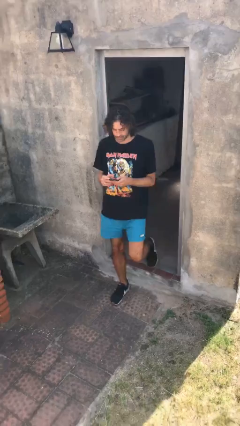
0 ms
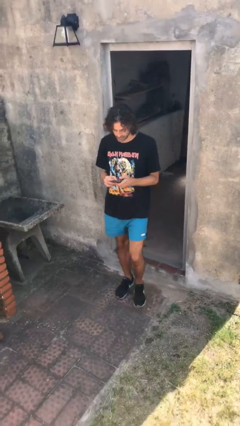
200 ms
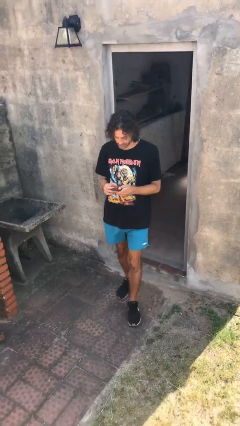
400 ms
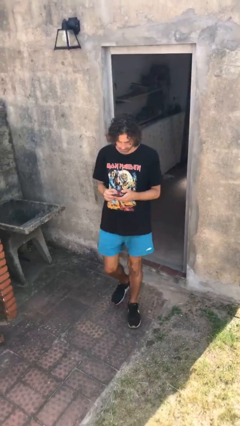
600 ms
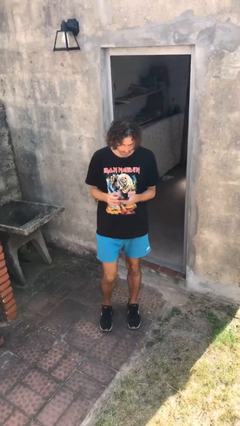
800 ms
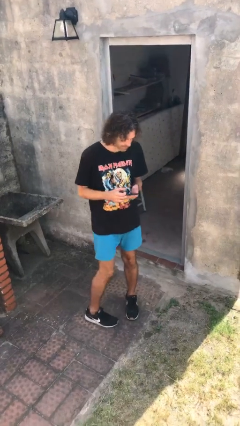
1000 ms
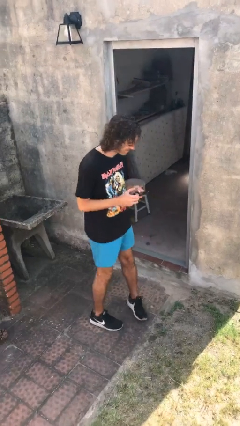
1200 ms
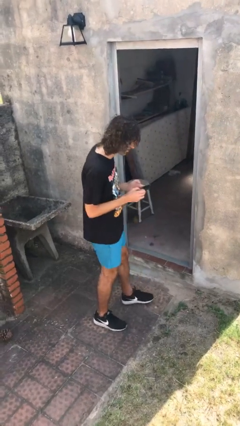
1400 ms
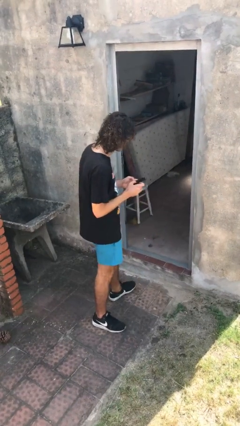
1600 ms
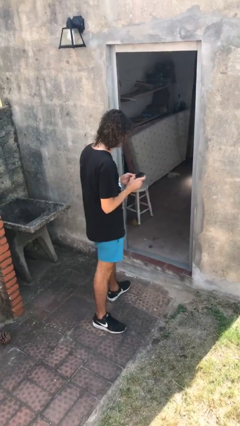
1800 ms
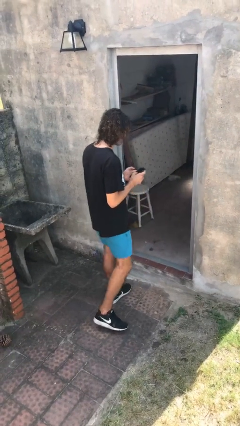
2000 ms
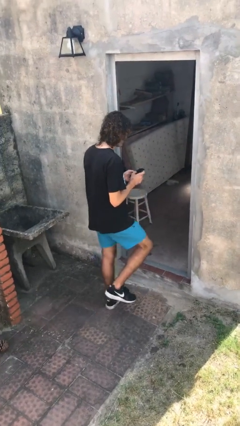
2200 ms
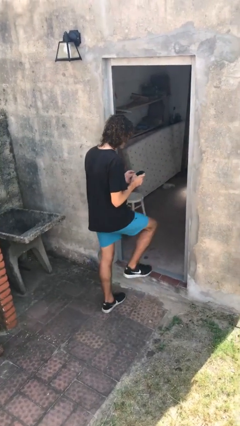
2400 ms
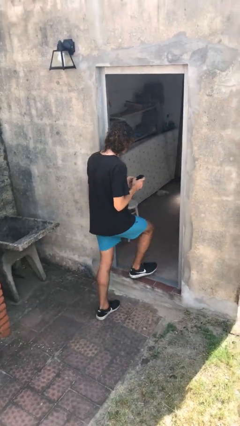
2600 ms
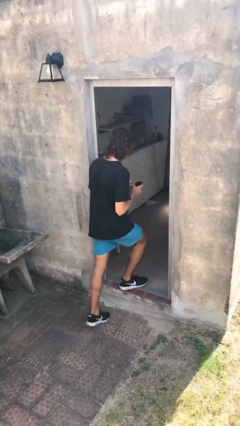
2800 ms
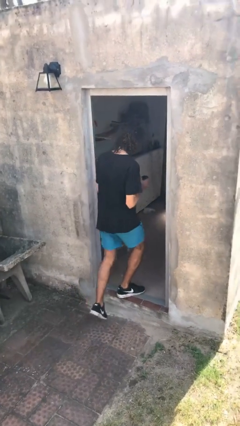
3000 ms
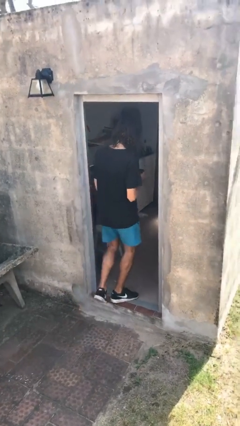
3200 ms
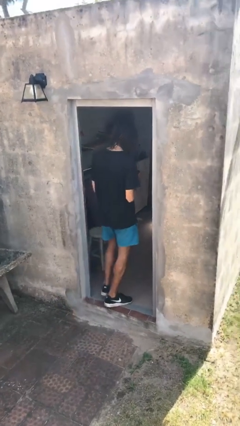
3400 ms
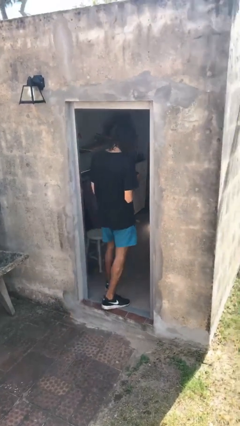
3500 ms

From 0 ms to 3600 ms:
person exits scene through structure

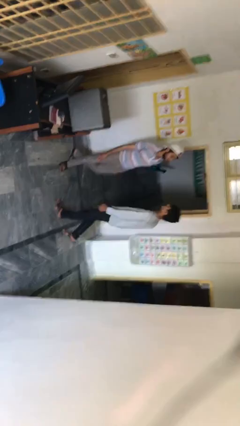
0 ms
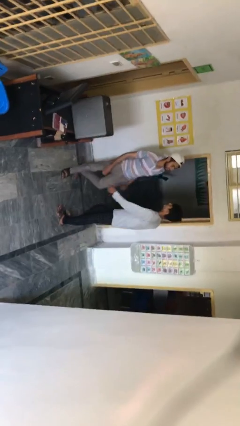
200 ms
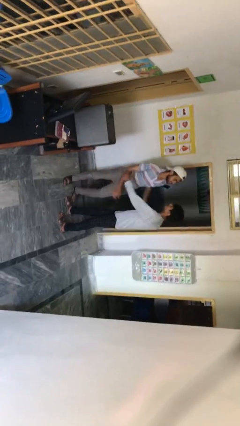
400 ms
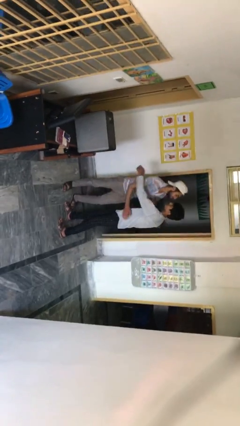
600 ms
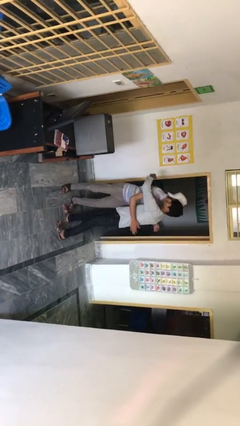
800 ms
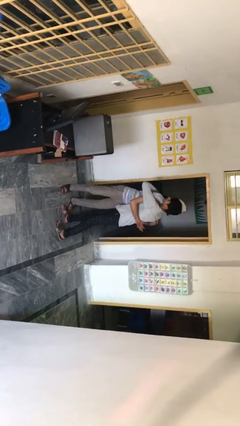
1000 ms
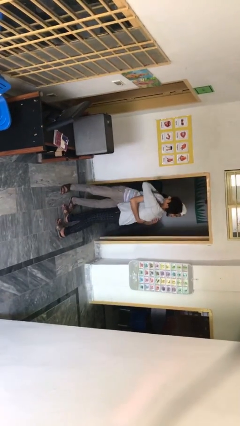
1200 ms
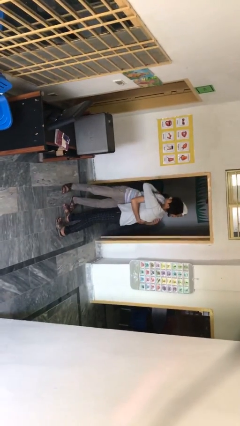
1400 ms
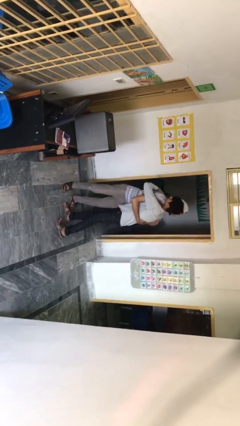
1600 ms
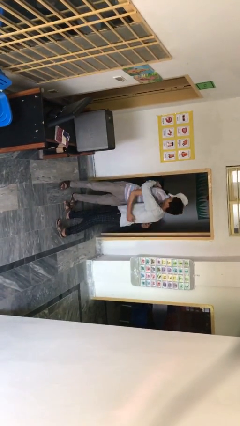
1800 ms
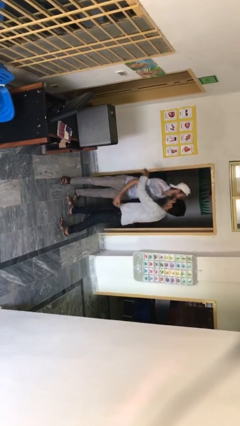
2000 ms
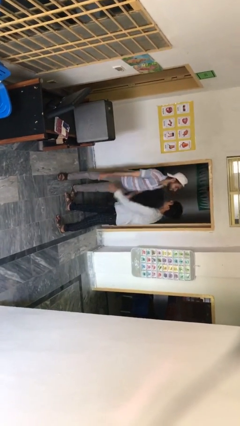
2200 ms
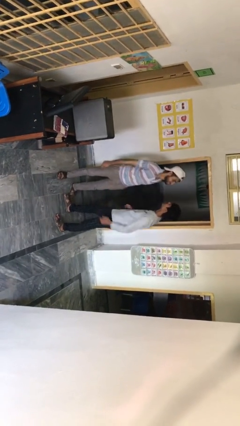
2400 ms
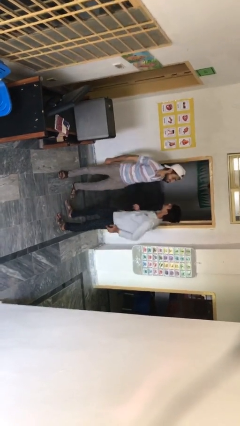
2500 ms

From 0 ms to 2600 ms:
person embraces person

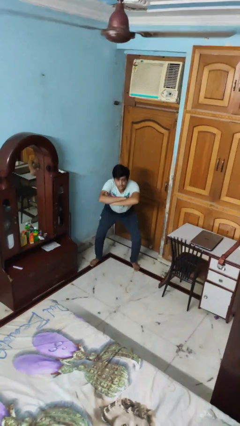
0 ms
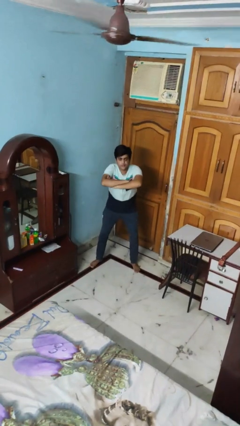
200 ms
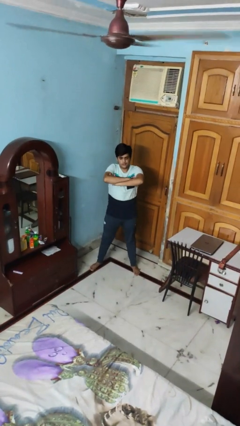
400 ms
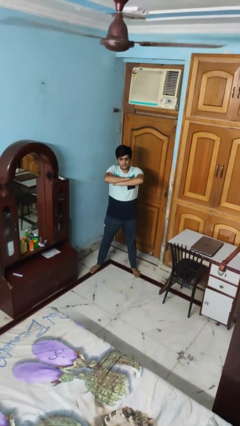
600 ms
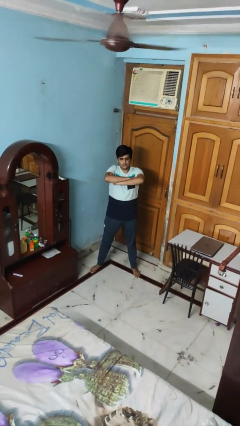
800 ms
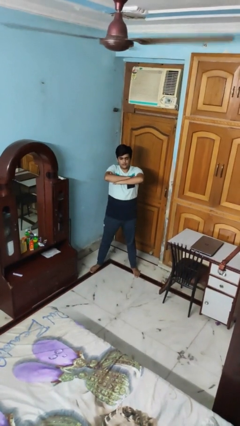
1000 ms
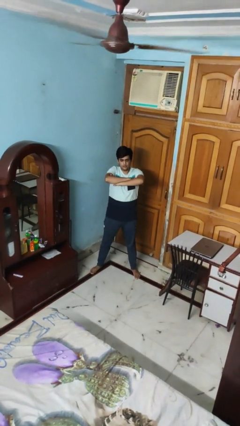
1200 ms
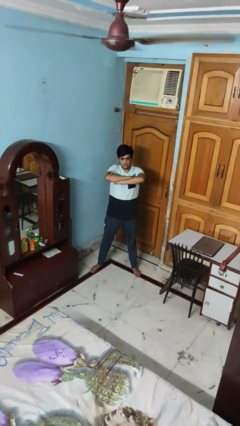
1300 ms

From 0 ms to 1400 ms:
person stands up

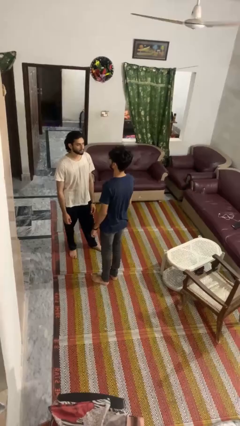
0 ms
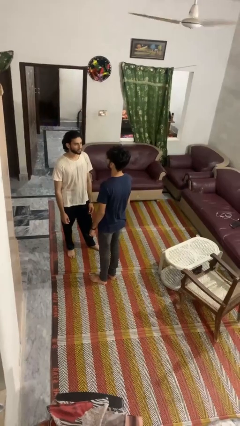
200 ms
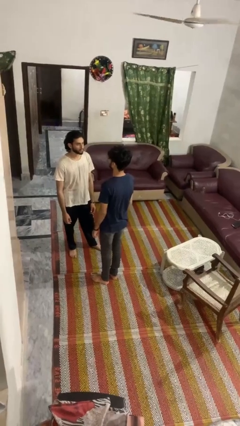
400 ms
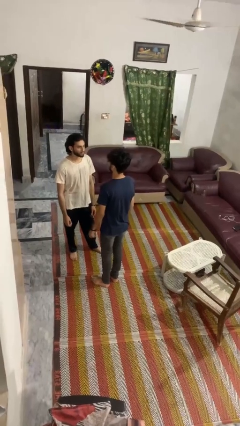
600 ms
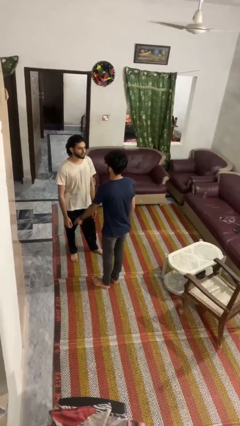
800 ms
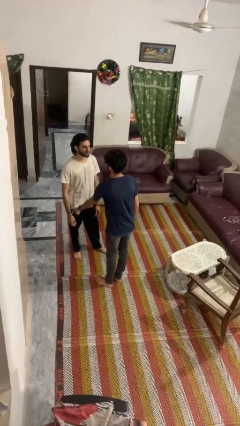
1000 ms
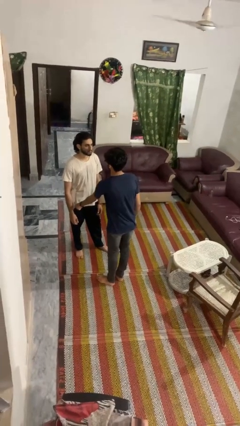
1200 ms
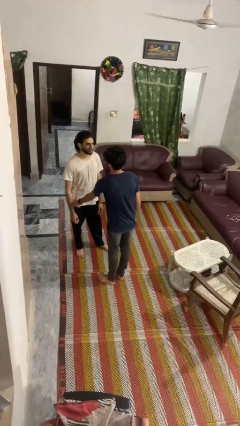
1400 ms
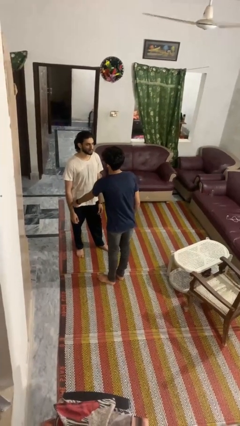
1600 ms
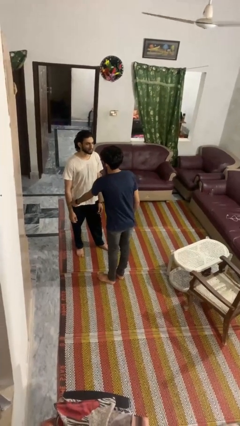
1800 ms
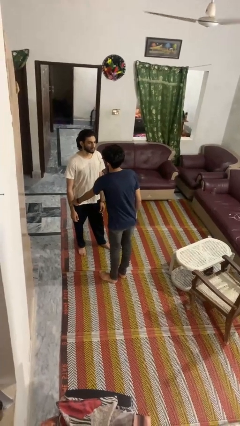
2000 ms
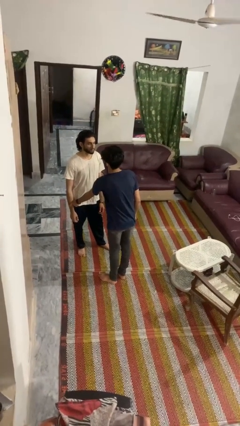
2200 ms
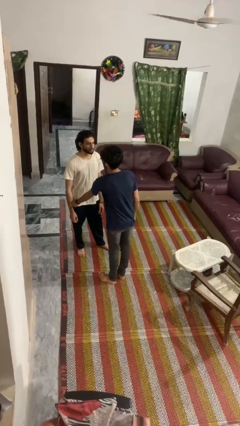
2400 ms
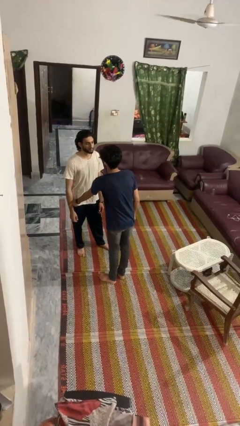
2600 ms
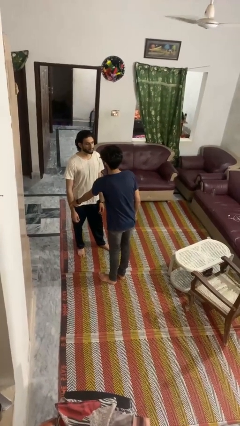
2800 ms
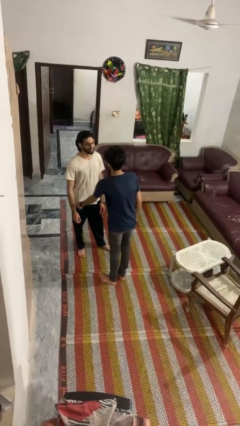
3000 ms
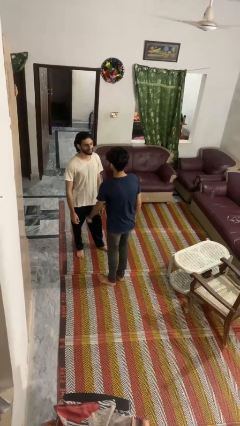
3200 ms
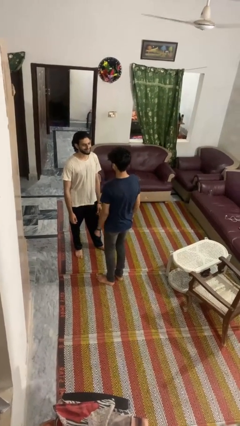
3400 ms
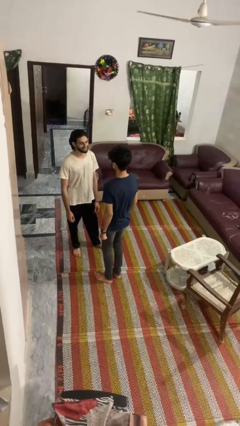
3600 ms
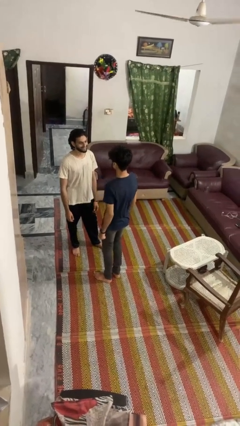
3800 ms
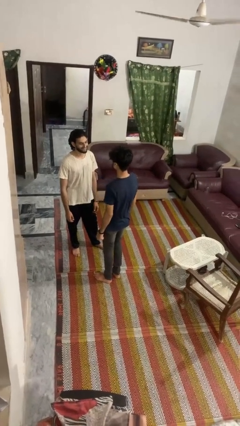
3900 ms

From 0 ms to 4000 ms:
person grabs person by forearm

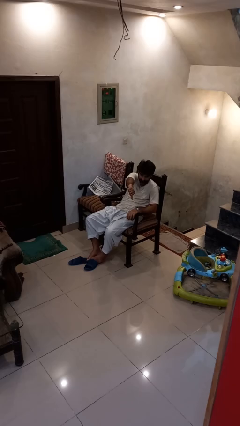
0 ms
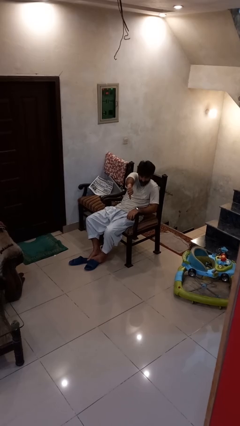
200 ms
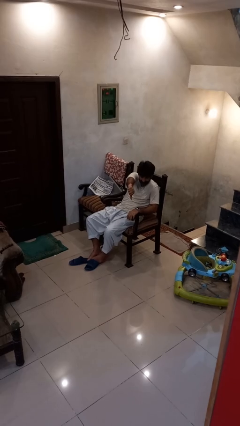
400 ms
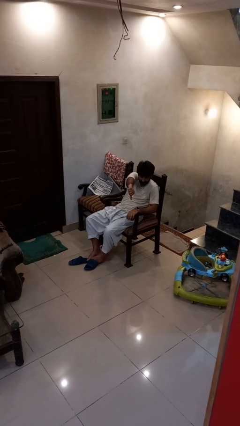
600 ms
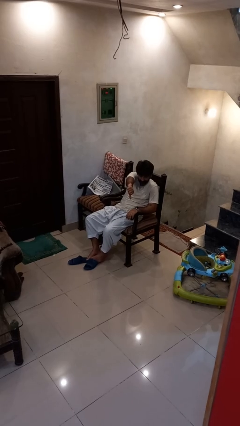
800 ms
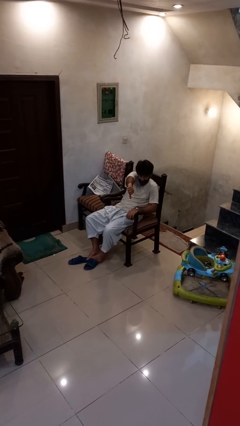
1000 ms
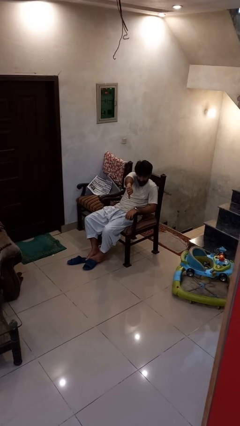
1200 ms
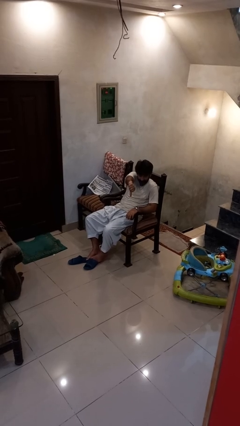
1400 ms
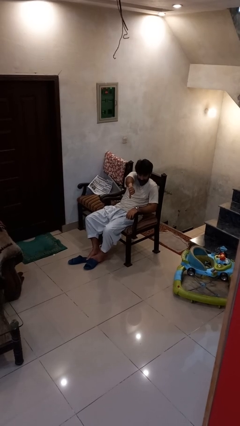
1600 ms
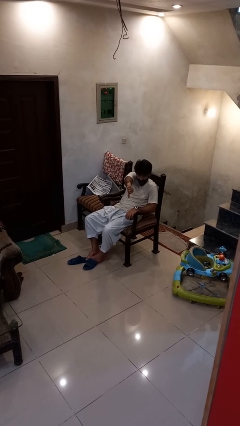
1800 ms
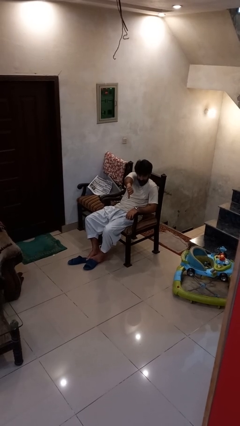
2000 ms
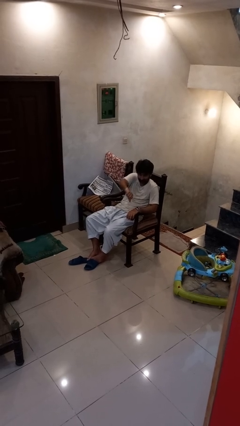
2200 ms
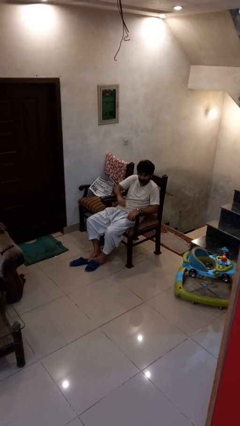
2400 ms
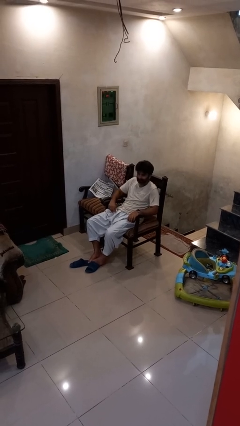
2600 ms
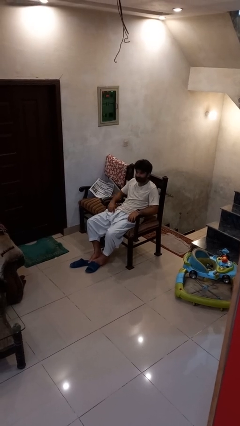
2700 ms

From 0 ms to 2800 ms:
person gestures thumbs down

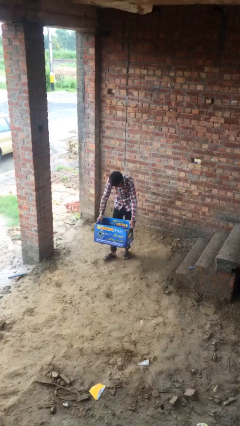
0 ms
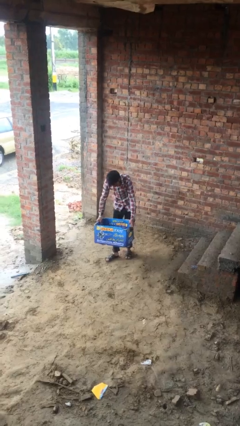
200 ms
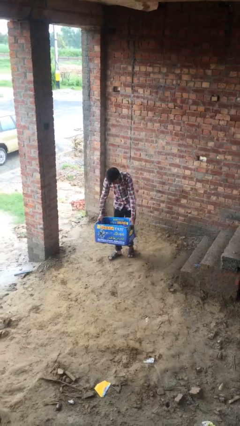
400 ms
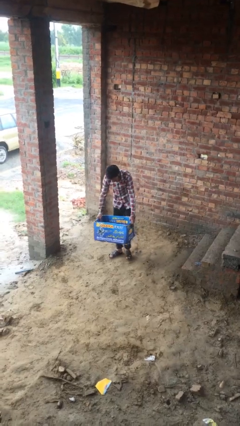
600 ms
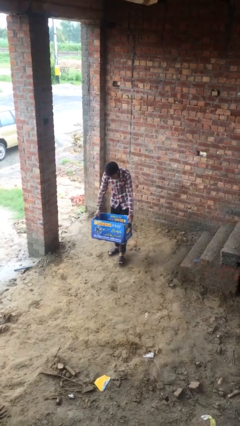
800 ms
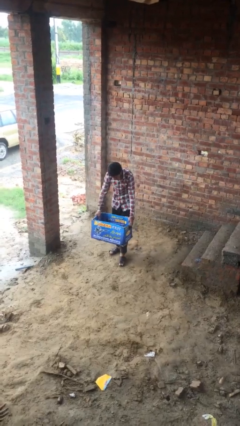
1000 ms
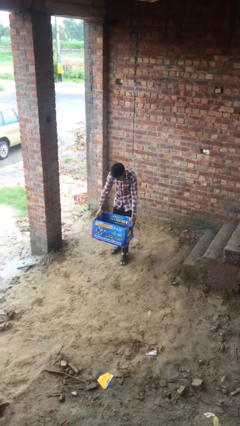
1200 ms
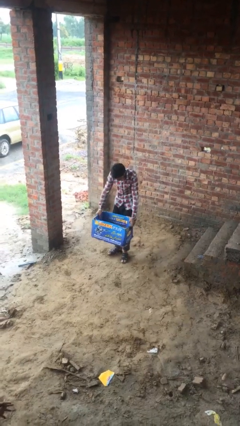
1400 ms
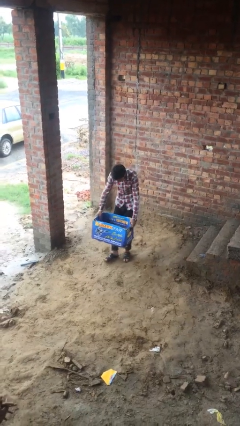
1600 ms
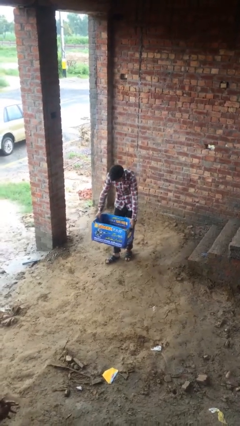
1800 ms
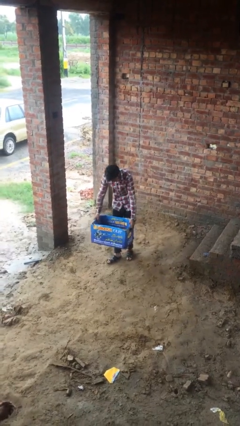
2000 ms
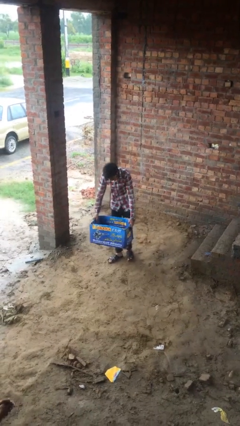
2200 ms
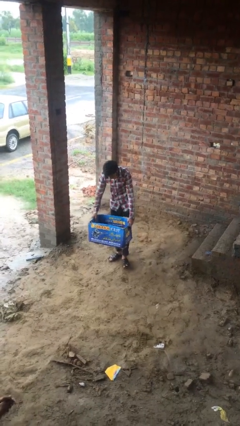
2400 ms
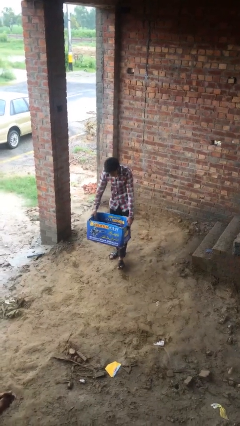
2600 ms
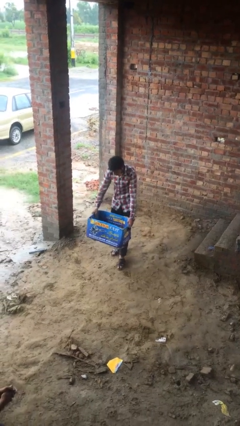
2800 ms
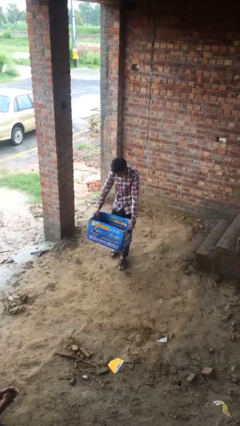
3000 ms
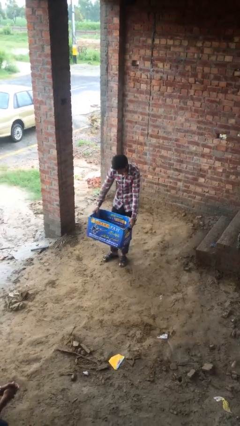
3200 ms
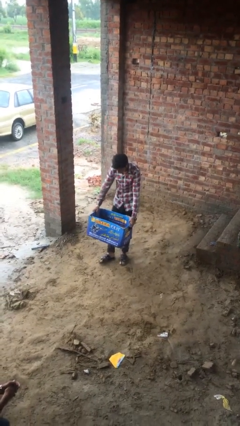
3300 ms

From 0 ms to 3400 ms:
person carries heavy object

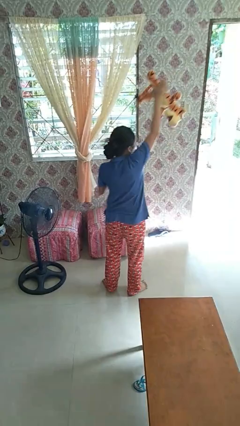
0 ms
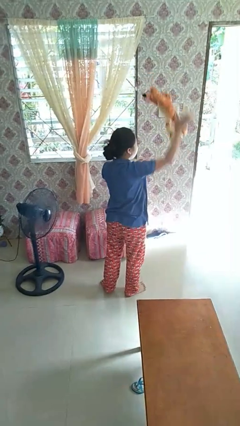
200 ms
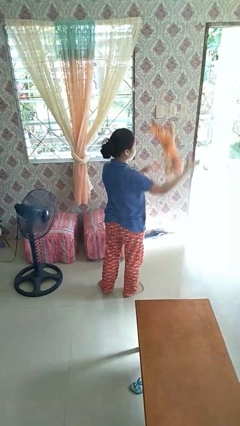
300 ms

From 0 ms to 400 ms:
person drops object
